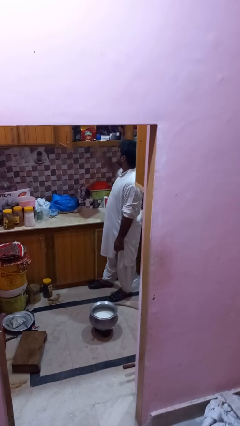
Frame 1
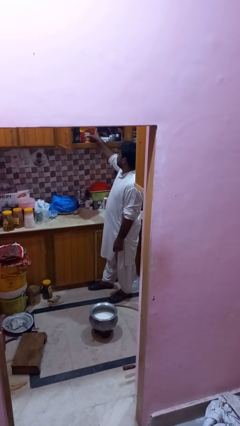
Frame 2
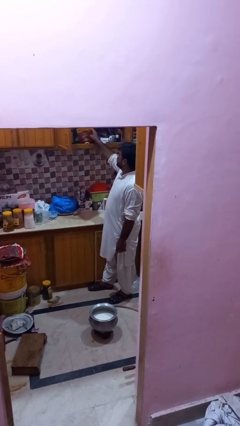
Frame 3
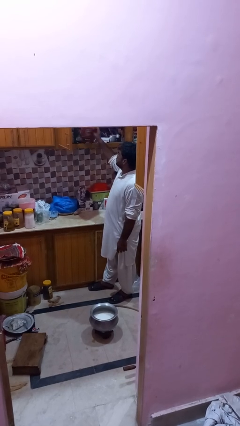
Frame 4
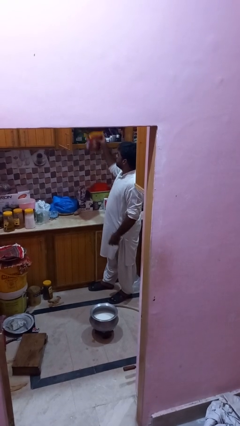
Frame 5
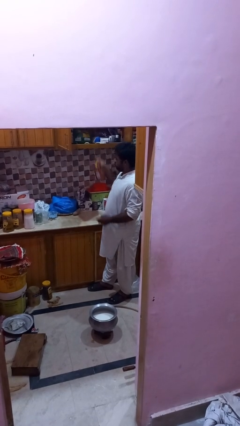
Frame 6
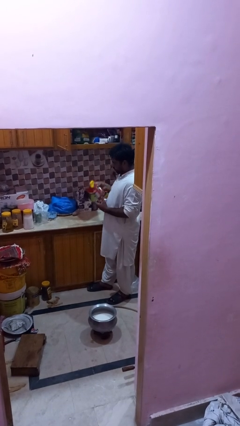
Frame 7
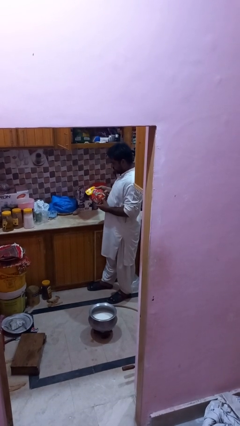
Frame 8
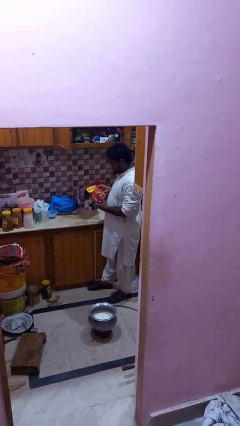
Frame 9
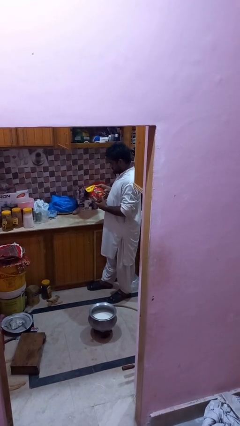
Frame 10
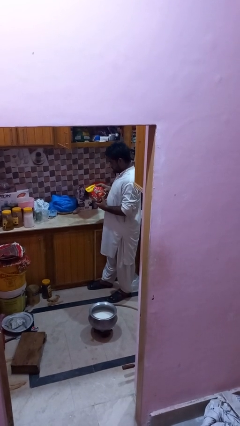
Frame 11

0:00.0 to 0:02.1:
person picks up object from cabinet

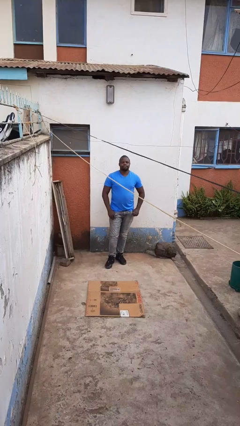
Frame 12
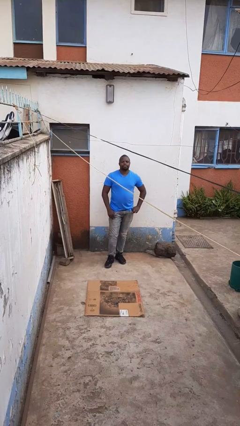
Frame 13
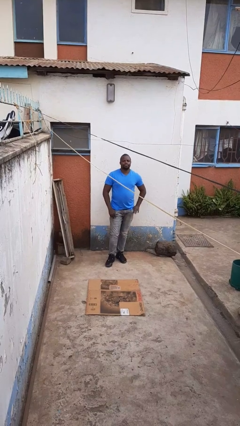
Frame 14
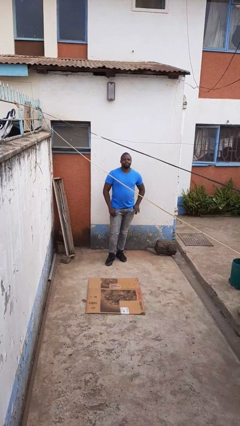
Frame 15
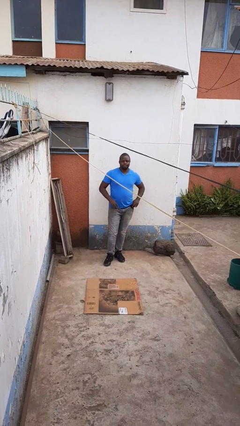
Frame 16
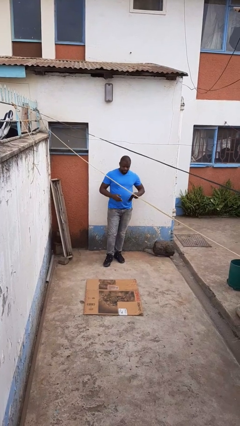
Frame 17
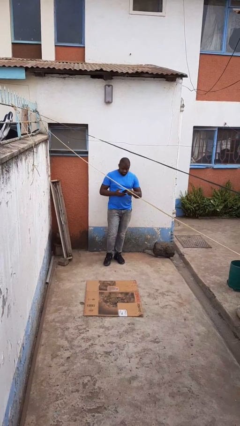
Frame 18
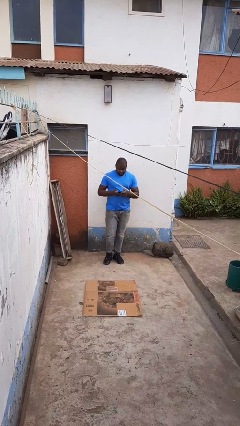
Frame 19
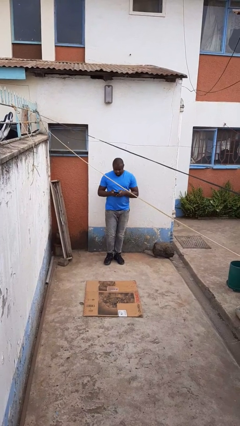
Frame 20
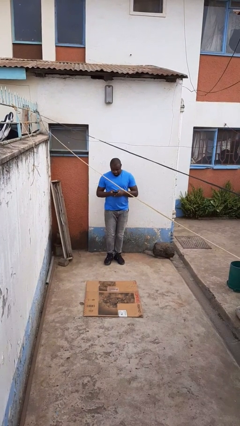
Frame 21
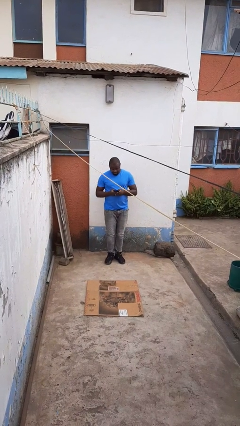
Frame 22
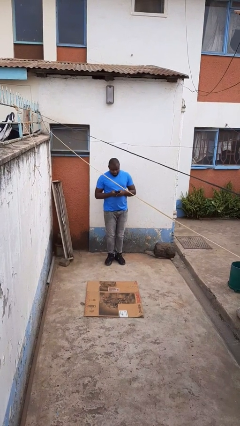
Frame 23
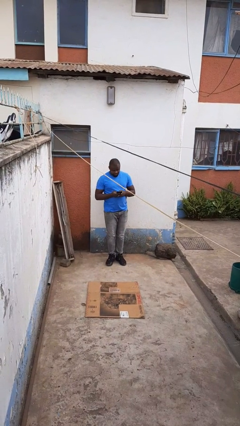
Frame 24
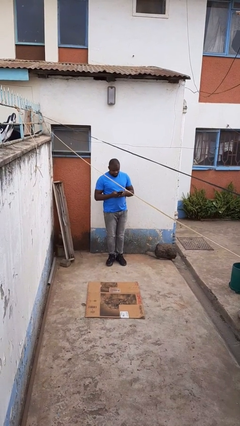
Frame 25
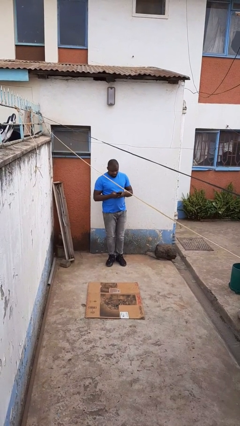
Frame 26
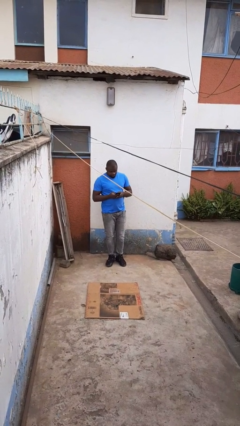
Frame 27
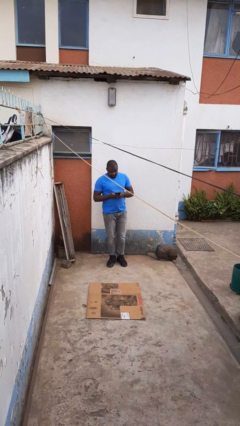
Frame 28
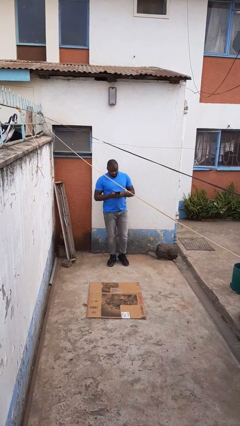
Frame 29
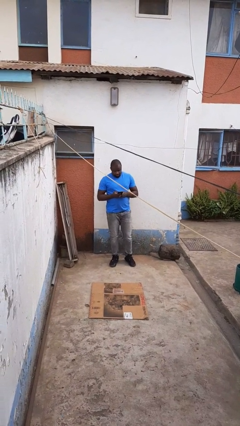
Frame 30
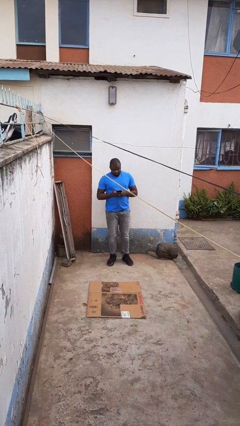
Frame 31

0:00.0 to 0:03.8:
person takes phone from pocket

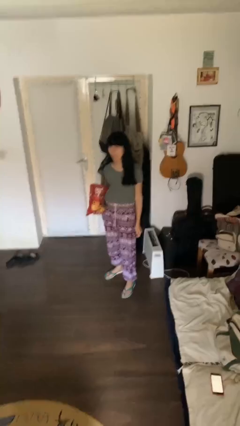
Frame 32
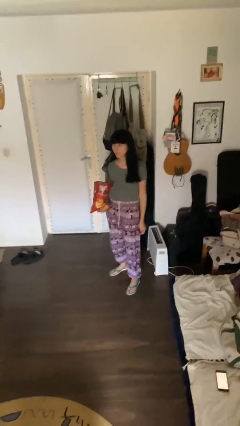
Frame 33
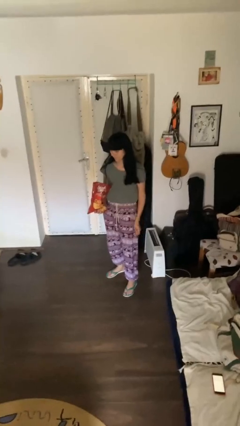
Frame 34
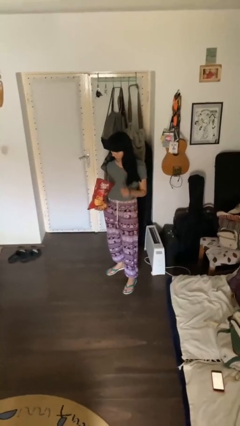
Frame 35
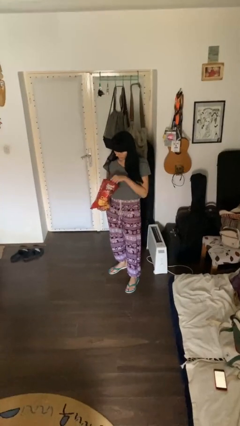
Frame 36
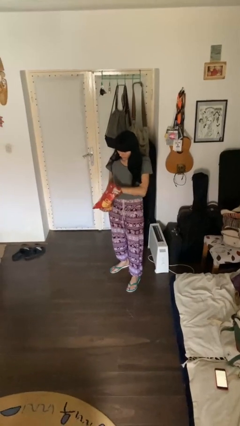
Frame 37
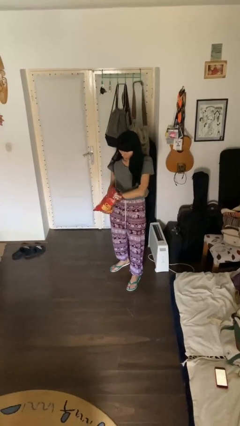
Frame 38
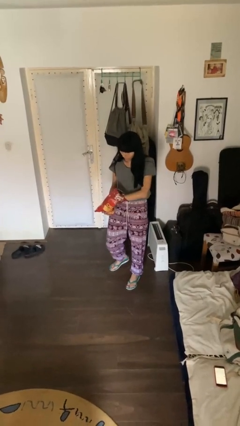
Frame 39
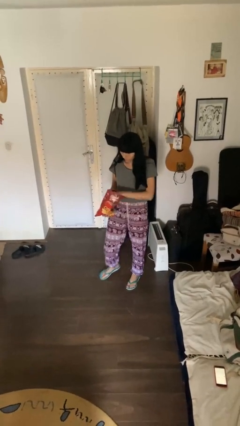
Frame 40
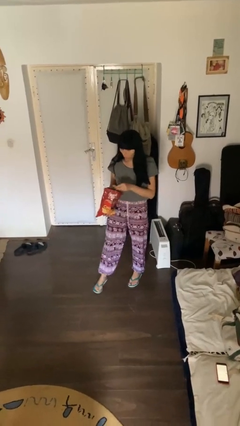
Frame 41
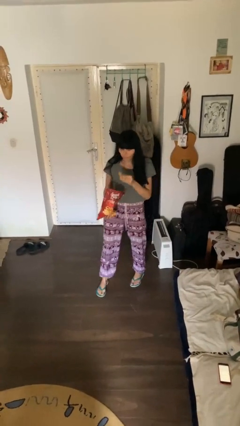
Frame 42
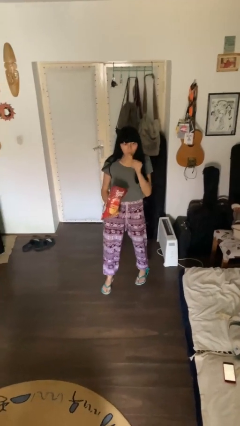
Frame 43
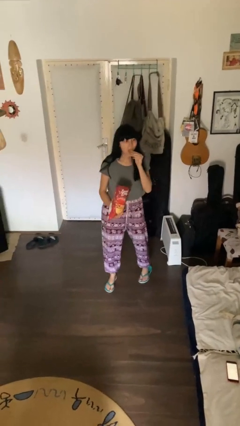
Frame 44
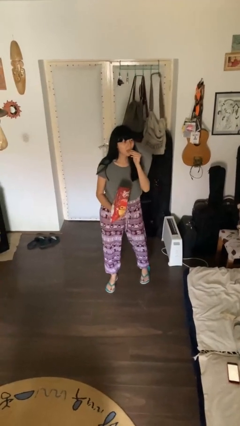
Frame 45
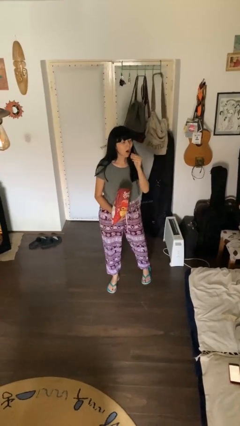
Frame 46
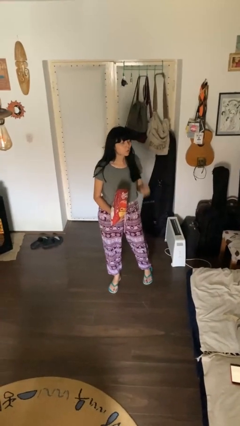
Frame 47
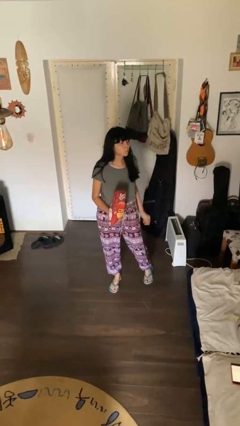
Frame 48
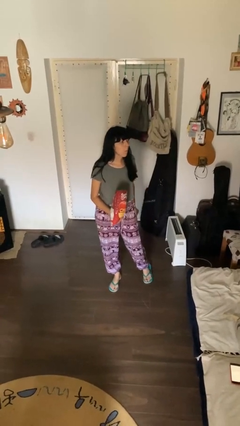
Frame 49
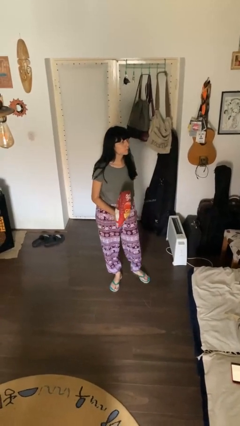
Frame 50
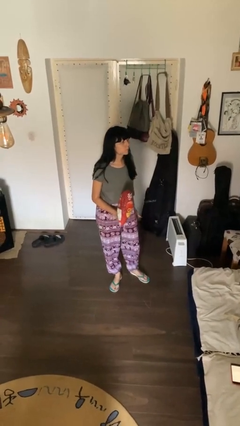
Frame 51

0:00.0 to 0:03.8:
person eats snack from bag

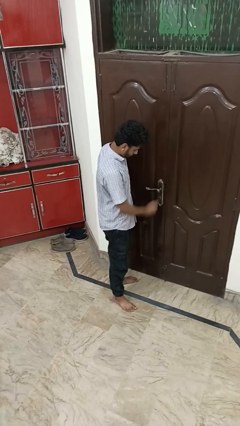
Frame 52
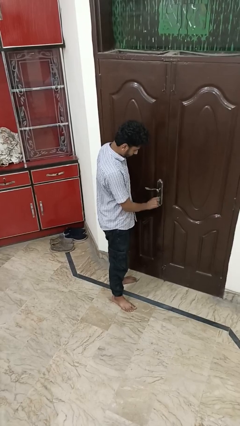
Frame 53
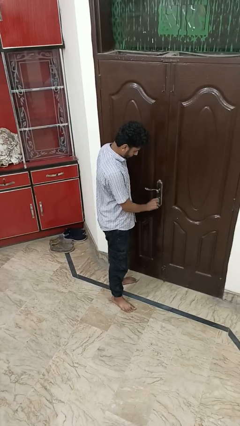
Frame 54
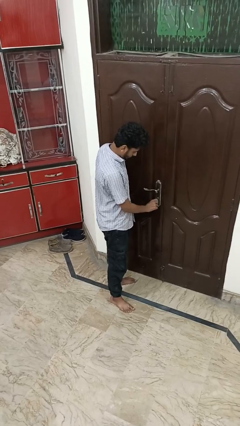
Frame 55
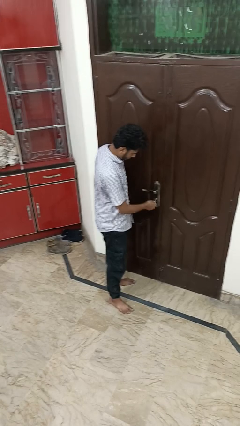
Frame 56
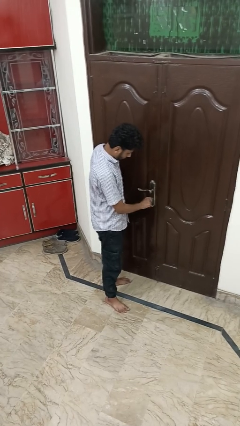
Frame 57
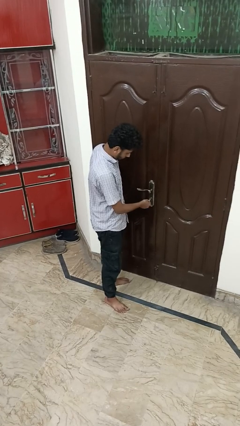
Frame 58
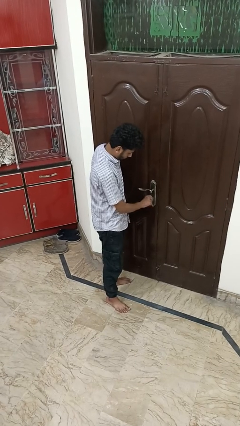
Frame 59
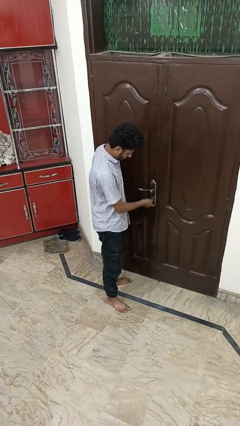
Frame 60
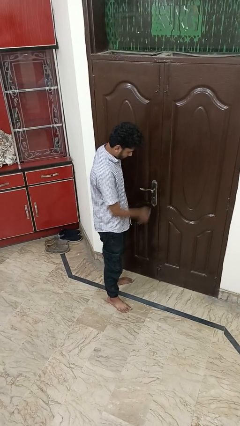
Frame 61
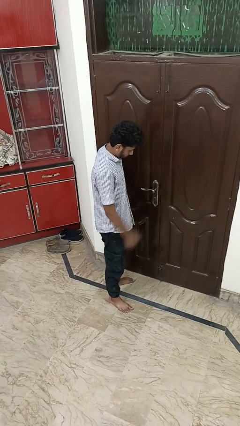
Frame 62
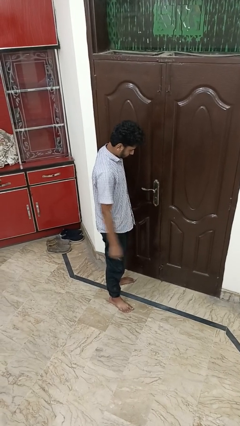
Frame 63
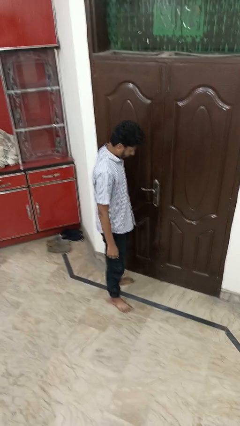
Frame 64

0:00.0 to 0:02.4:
person locks door with keys

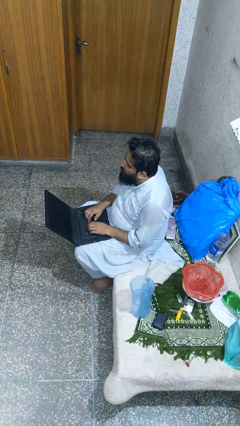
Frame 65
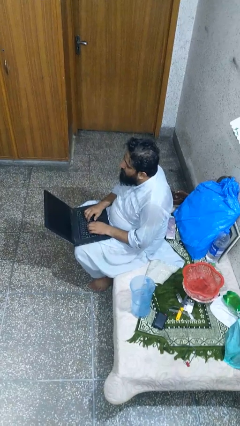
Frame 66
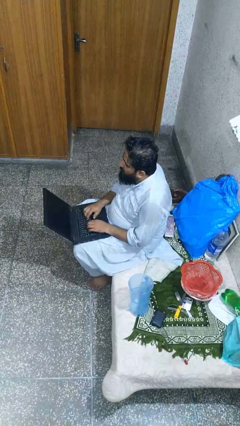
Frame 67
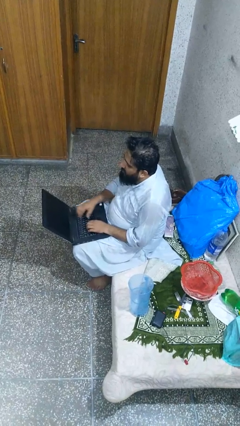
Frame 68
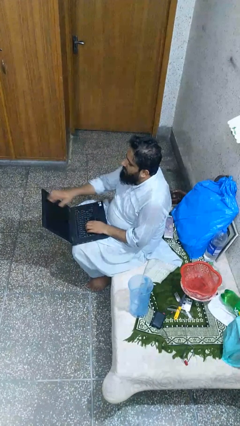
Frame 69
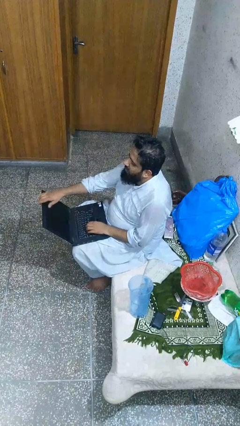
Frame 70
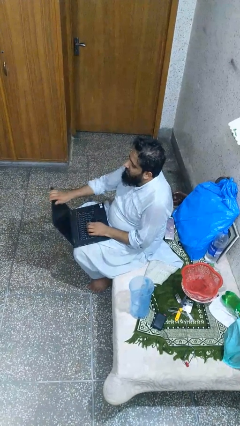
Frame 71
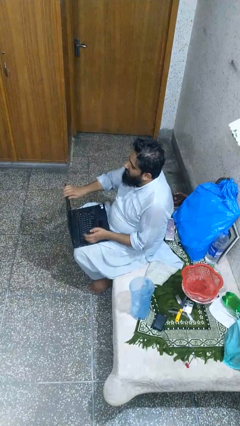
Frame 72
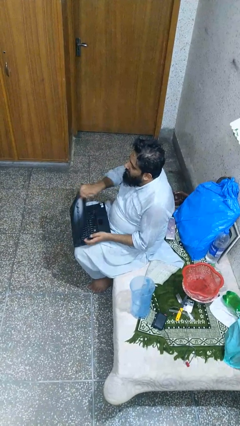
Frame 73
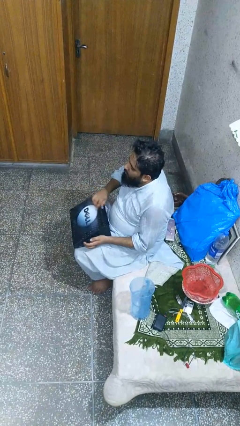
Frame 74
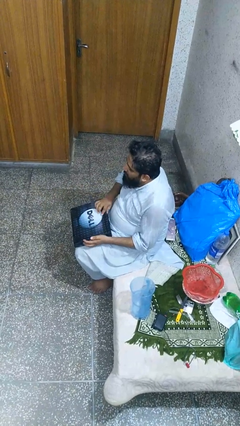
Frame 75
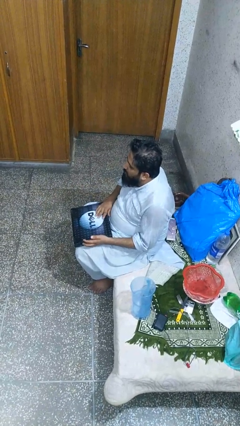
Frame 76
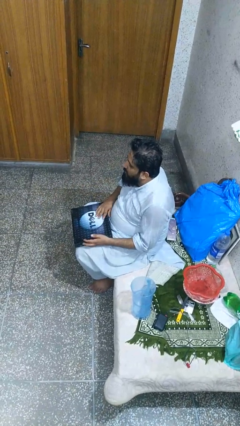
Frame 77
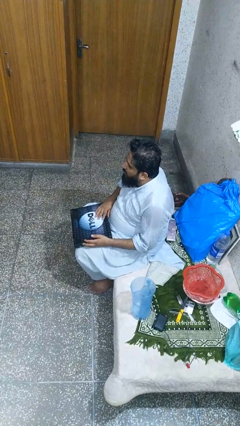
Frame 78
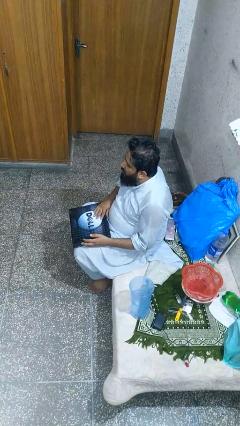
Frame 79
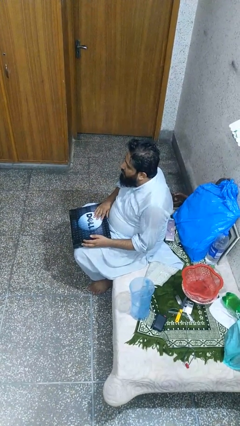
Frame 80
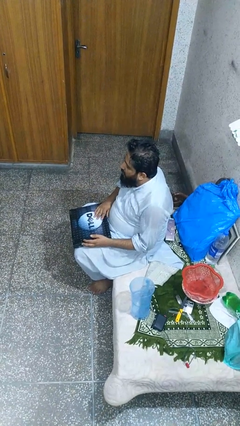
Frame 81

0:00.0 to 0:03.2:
person closes laptop

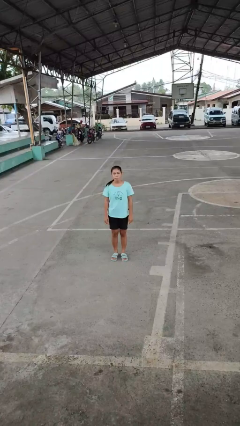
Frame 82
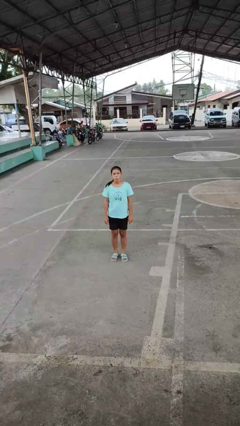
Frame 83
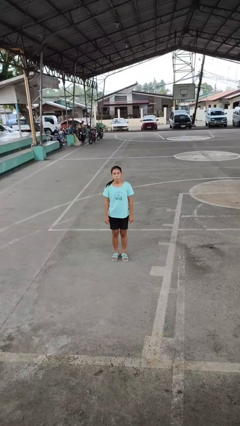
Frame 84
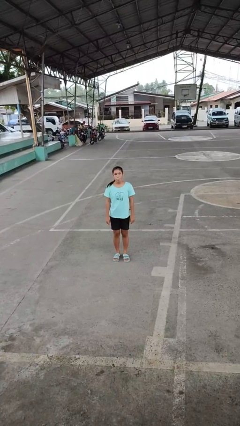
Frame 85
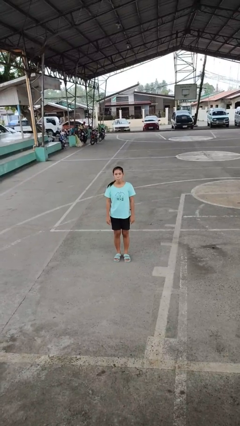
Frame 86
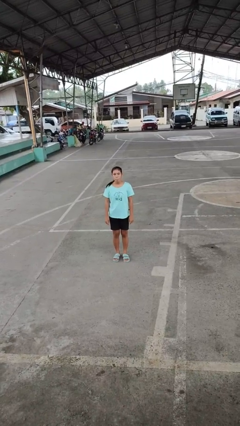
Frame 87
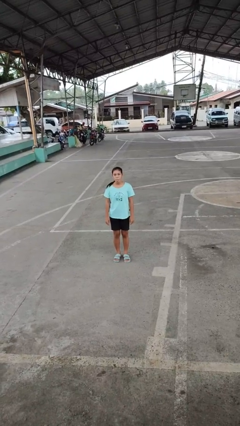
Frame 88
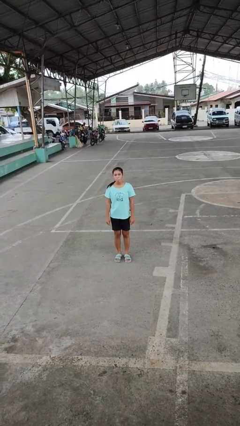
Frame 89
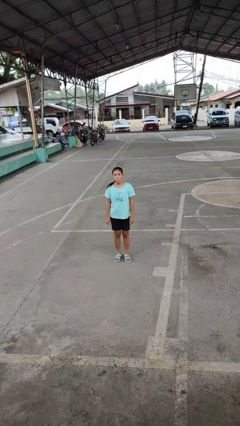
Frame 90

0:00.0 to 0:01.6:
person sticks out tongue

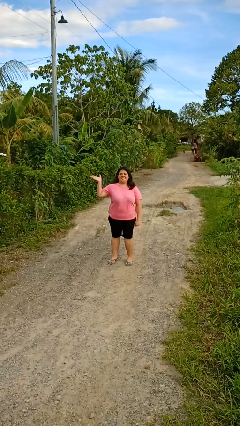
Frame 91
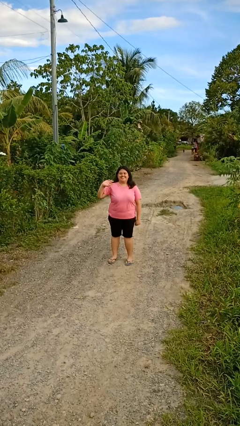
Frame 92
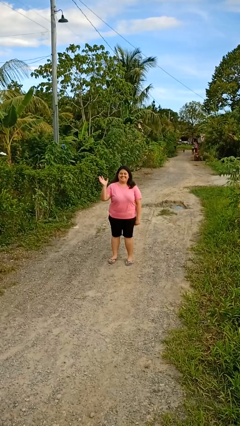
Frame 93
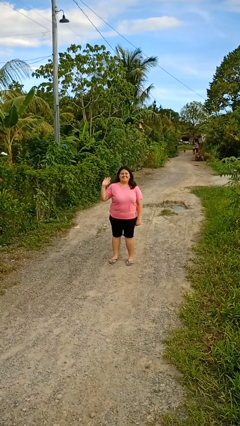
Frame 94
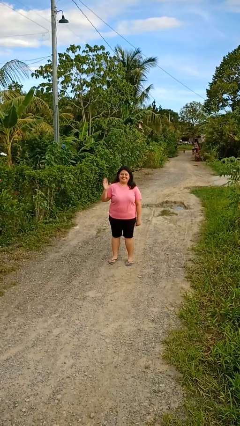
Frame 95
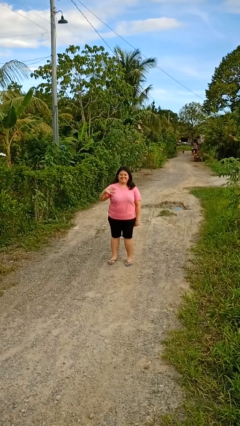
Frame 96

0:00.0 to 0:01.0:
person waves at person
